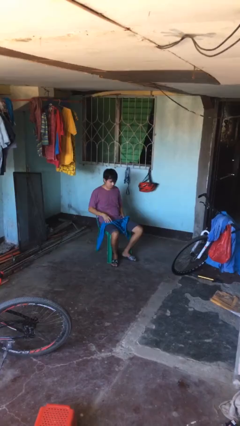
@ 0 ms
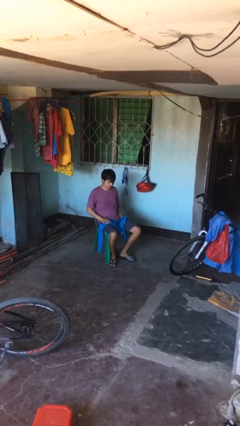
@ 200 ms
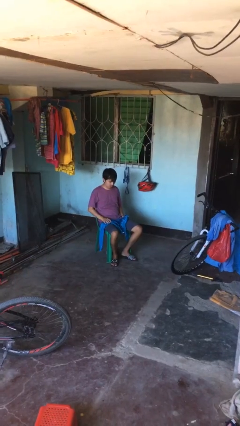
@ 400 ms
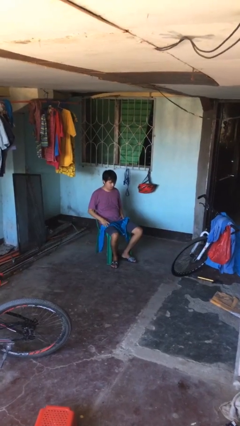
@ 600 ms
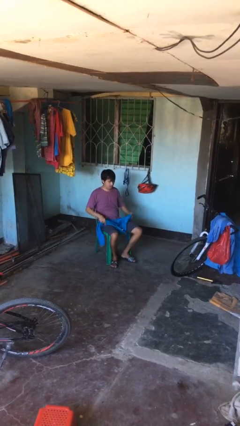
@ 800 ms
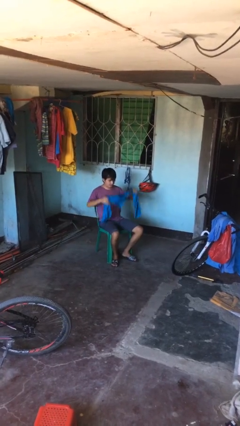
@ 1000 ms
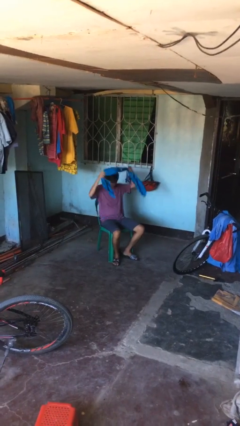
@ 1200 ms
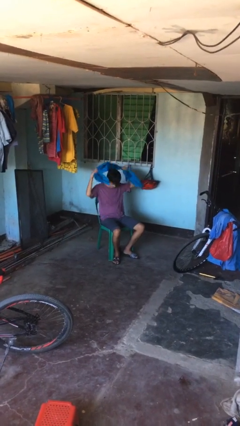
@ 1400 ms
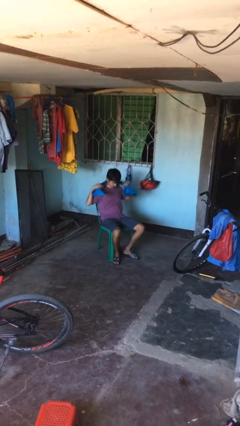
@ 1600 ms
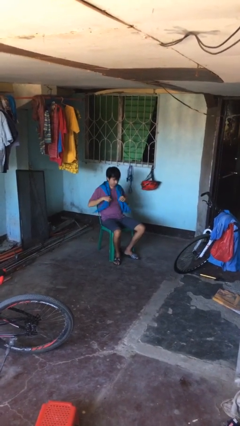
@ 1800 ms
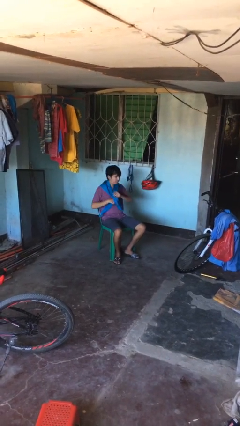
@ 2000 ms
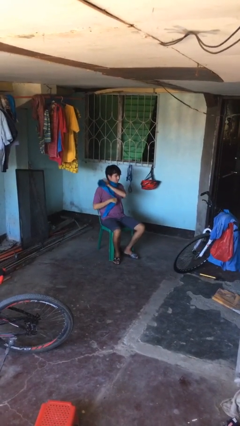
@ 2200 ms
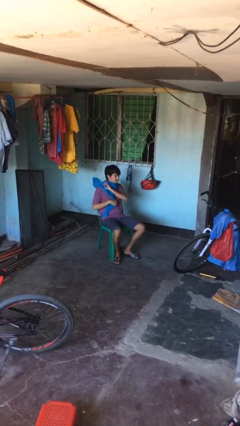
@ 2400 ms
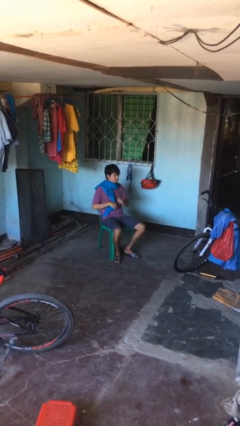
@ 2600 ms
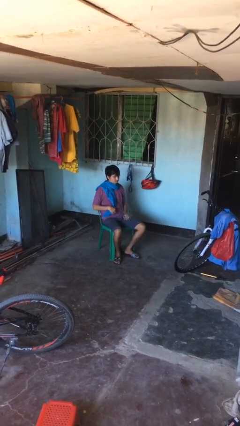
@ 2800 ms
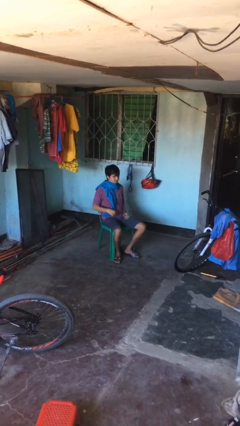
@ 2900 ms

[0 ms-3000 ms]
person puts on scarf

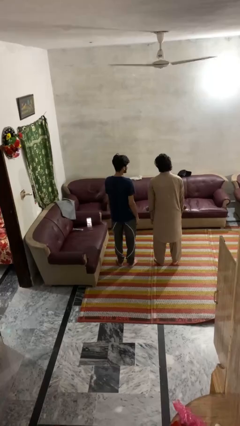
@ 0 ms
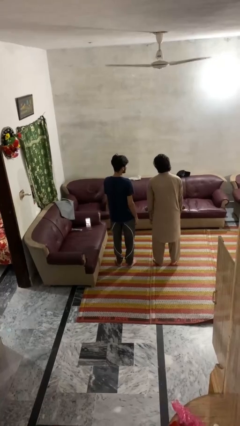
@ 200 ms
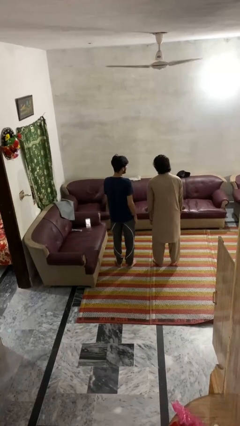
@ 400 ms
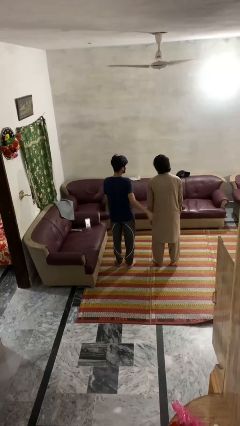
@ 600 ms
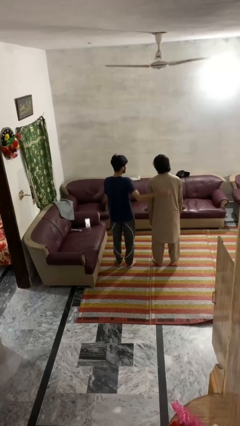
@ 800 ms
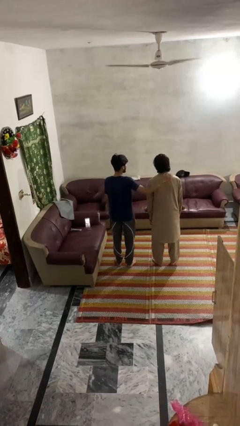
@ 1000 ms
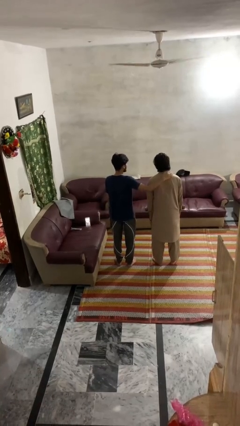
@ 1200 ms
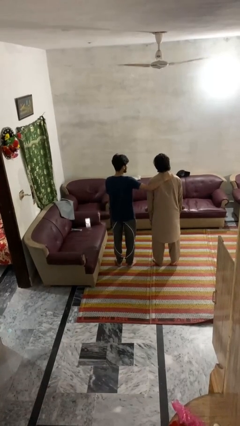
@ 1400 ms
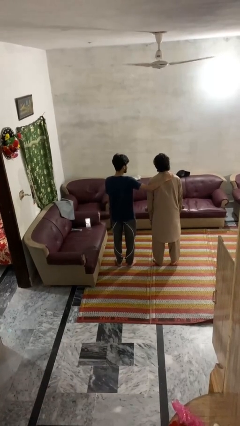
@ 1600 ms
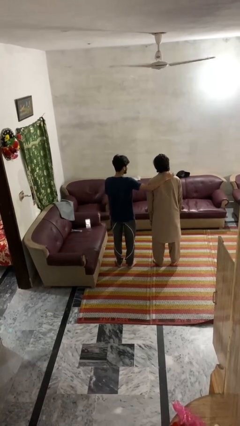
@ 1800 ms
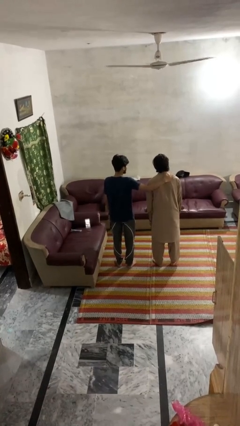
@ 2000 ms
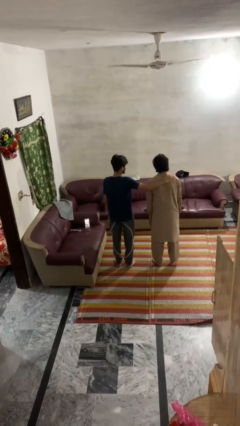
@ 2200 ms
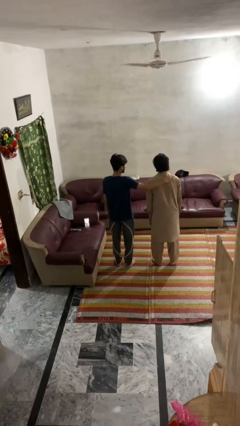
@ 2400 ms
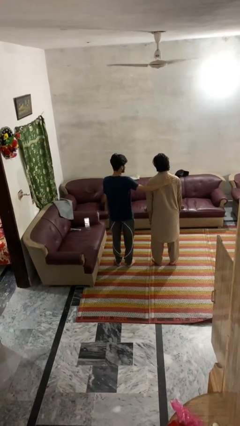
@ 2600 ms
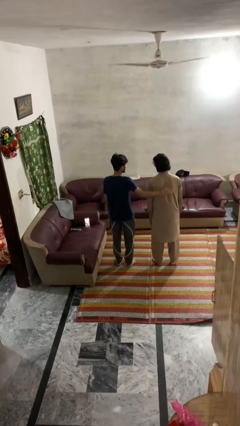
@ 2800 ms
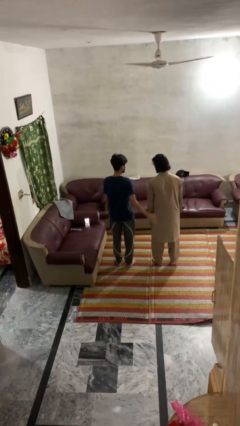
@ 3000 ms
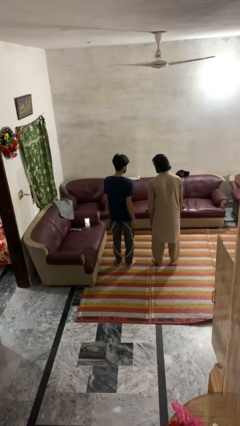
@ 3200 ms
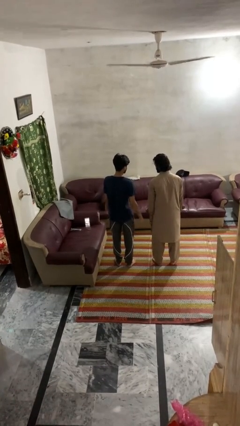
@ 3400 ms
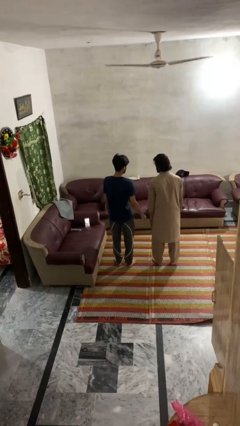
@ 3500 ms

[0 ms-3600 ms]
person pounds shoulders of person

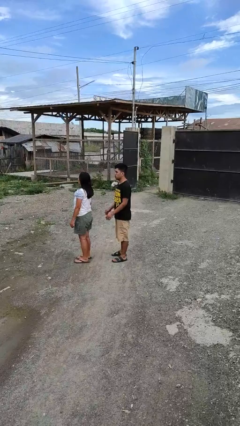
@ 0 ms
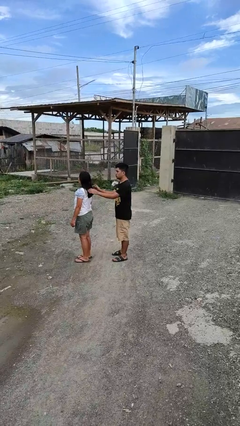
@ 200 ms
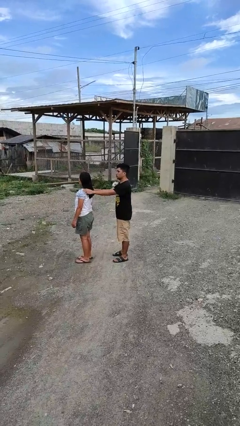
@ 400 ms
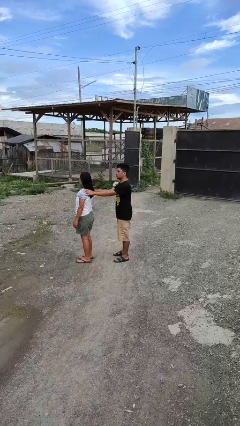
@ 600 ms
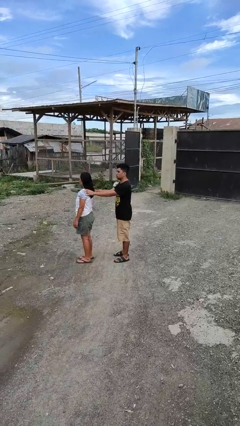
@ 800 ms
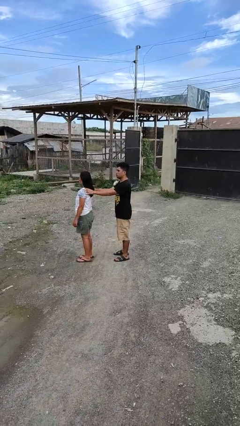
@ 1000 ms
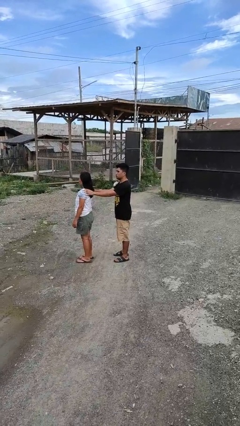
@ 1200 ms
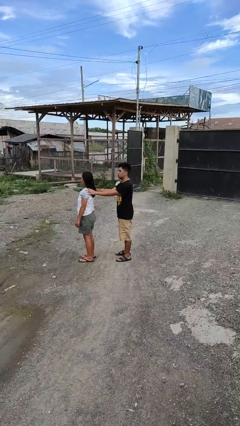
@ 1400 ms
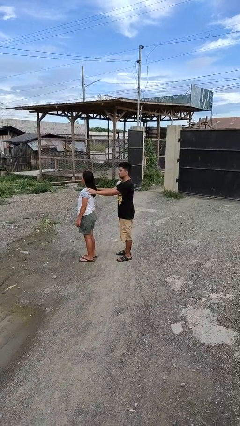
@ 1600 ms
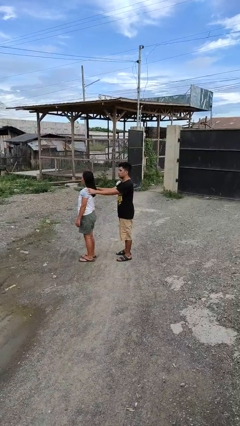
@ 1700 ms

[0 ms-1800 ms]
person grabs person by shoulder

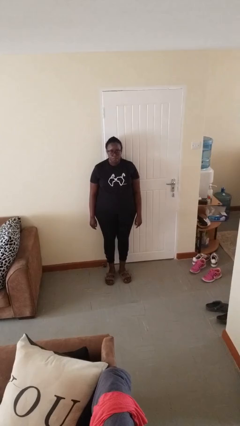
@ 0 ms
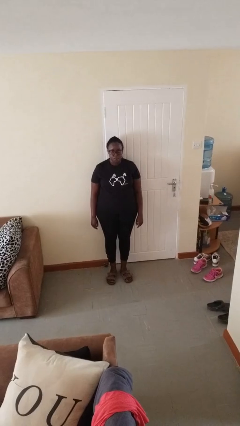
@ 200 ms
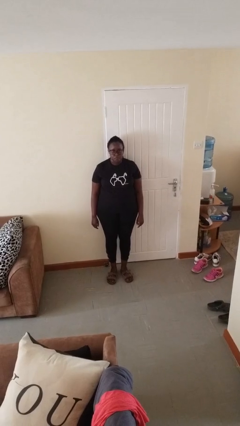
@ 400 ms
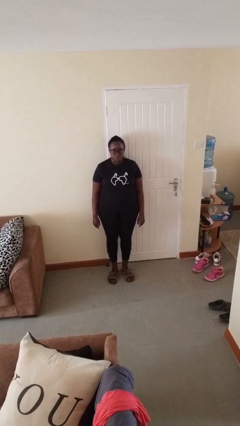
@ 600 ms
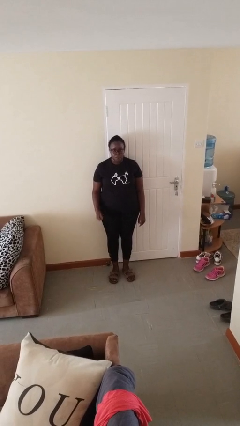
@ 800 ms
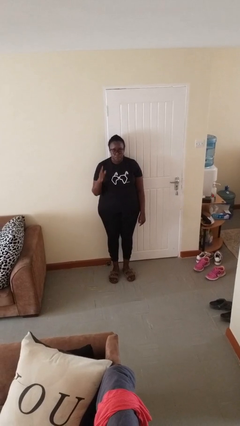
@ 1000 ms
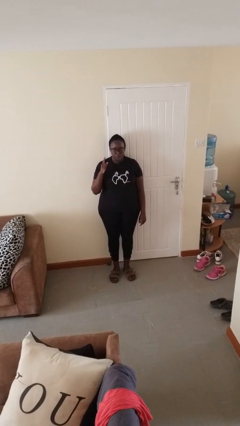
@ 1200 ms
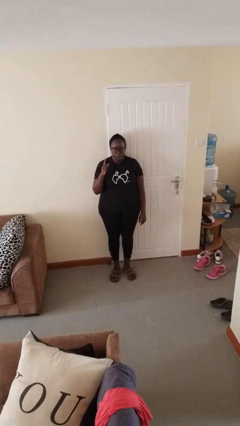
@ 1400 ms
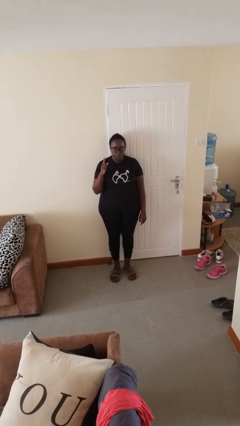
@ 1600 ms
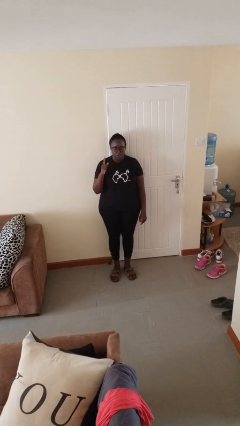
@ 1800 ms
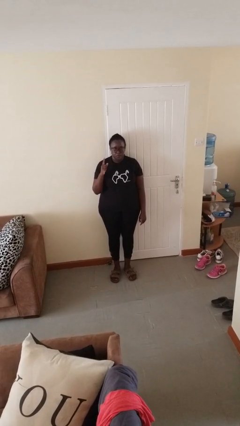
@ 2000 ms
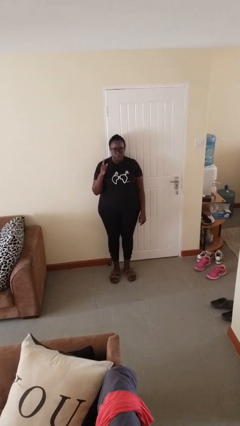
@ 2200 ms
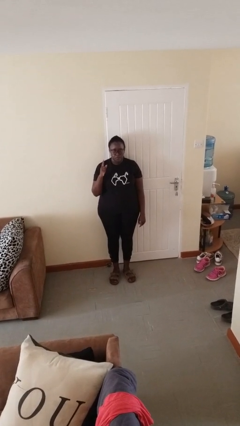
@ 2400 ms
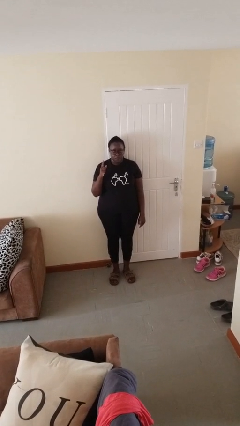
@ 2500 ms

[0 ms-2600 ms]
person gestures number one

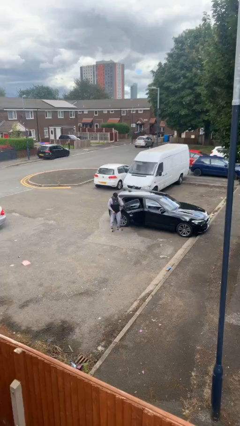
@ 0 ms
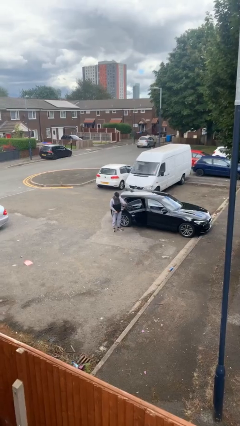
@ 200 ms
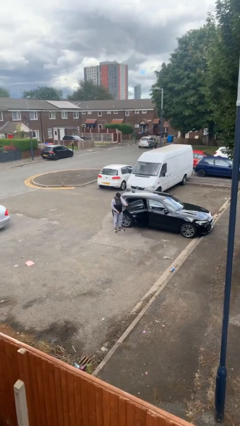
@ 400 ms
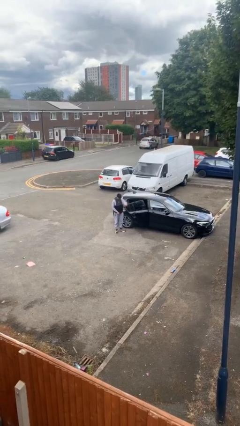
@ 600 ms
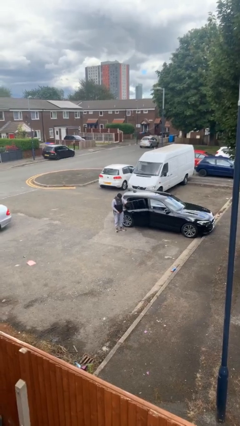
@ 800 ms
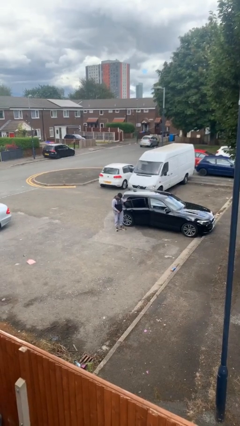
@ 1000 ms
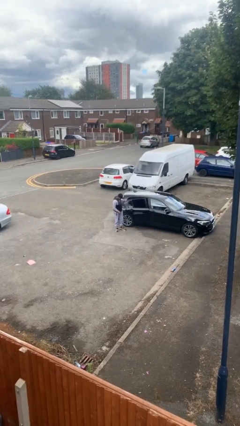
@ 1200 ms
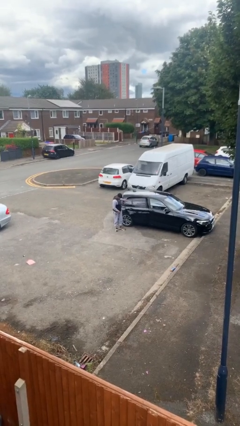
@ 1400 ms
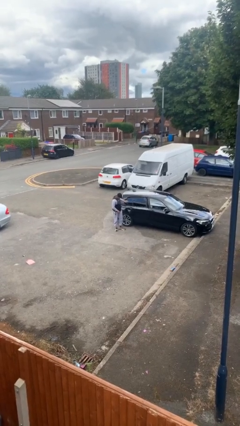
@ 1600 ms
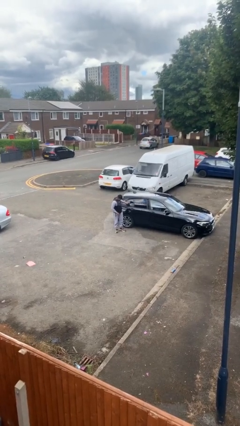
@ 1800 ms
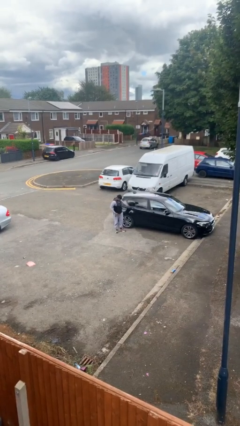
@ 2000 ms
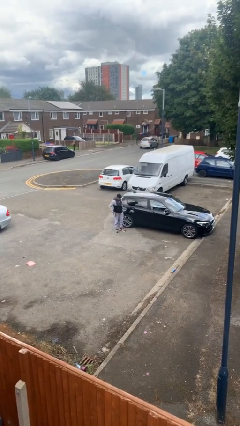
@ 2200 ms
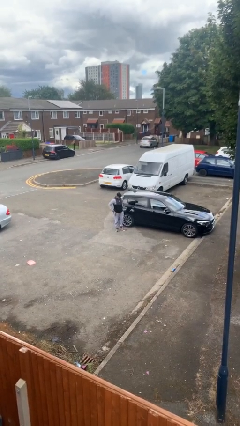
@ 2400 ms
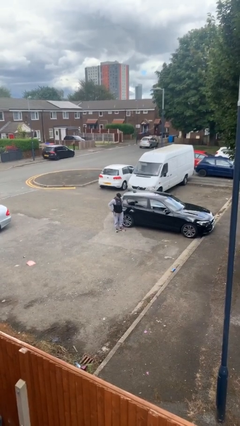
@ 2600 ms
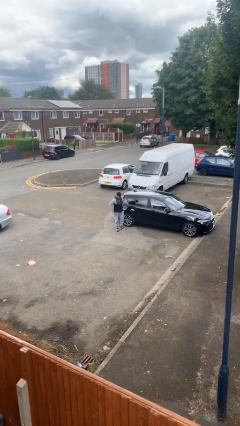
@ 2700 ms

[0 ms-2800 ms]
person closes car door

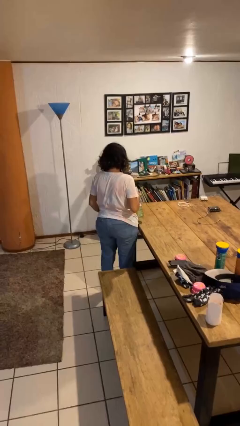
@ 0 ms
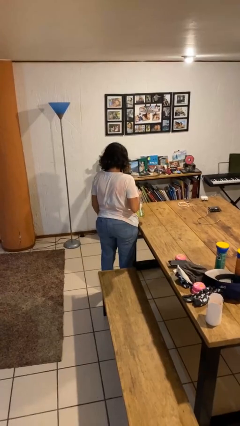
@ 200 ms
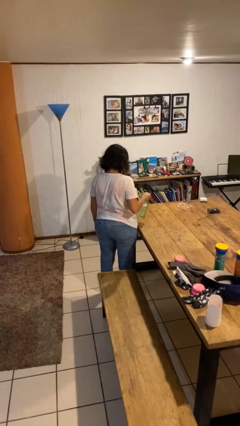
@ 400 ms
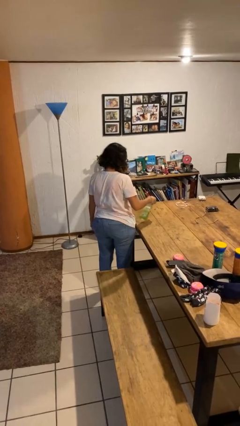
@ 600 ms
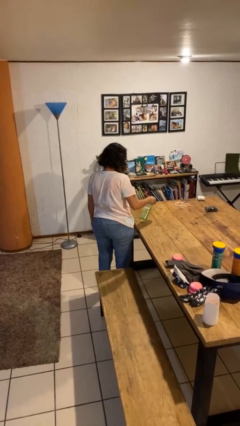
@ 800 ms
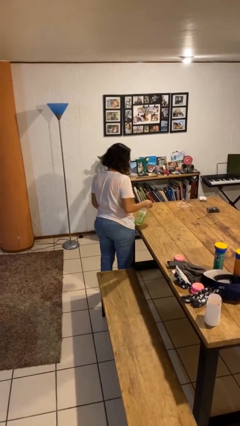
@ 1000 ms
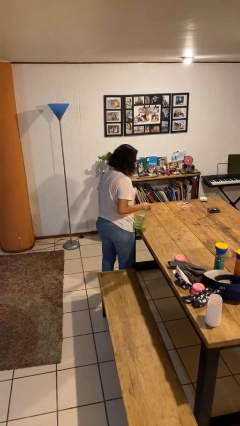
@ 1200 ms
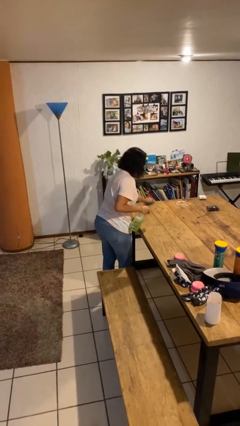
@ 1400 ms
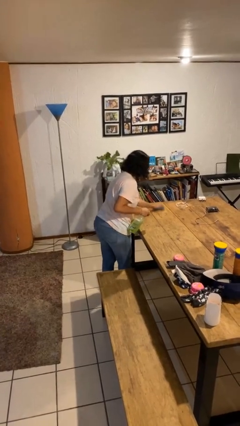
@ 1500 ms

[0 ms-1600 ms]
person sprays from bottle

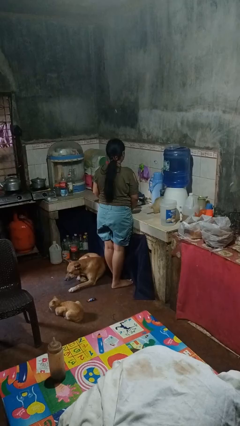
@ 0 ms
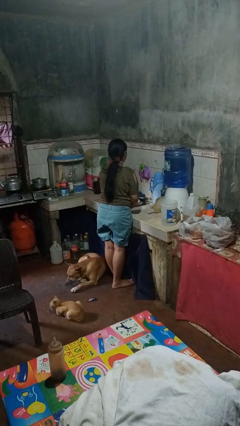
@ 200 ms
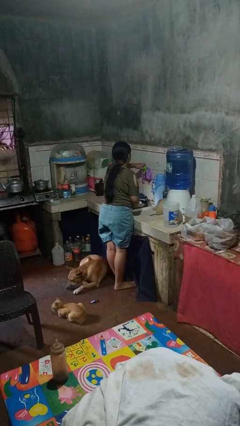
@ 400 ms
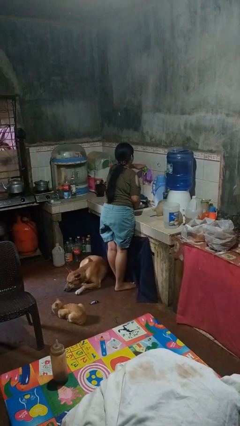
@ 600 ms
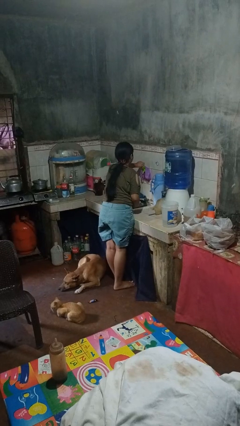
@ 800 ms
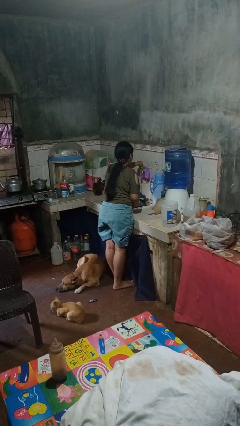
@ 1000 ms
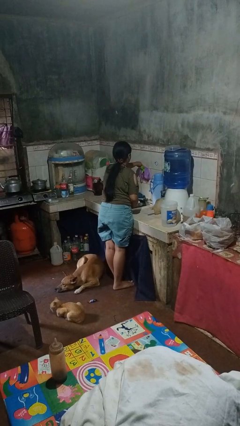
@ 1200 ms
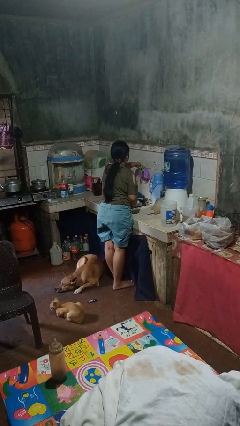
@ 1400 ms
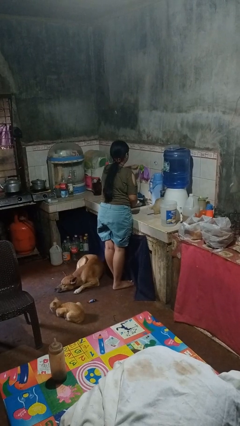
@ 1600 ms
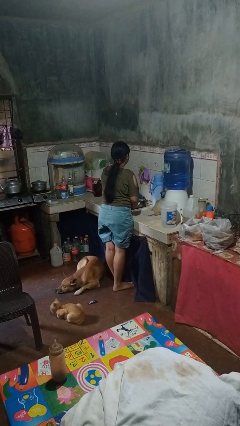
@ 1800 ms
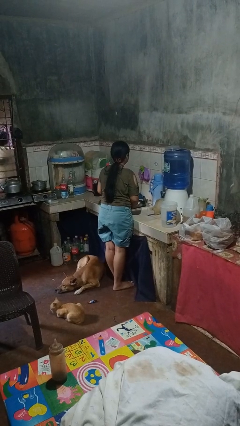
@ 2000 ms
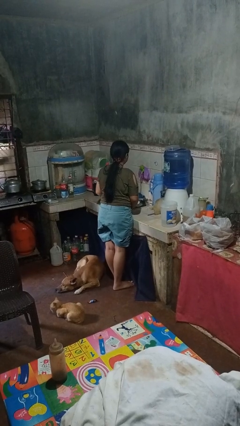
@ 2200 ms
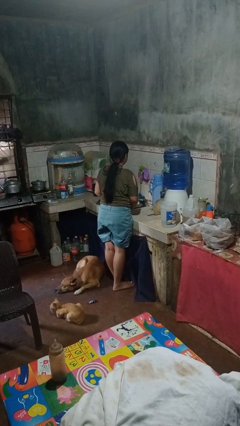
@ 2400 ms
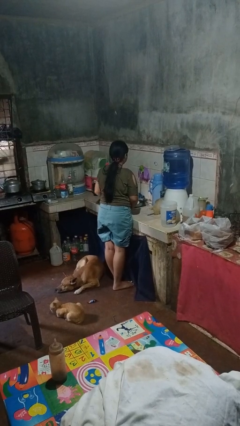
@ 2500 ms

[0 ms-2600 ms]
person turns on faucet
